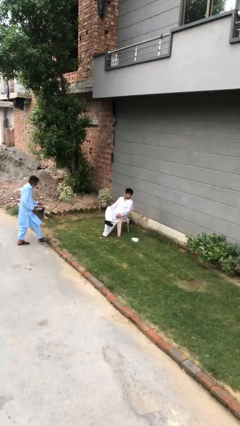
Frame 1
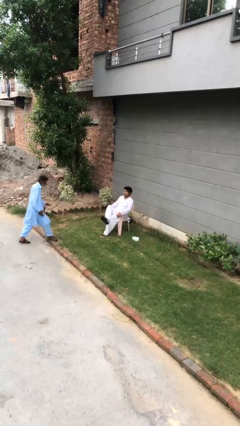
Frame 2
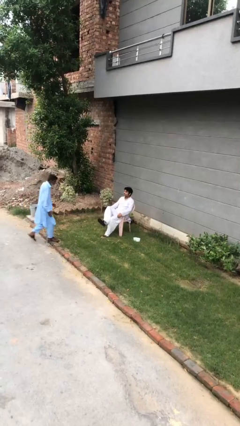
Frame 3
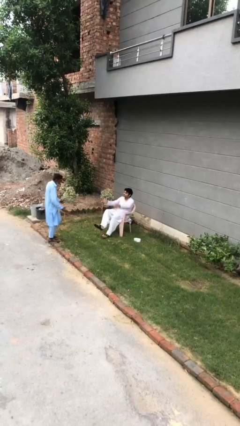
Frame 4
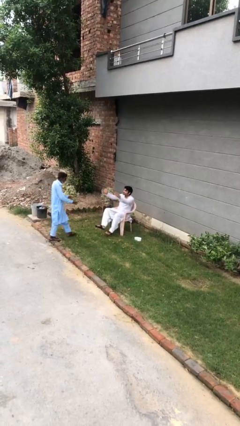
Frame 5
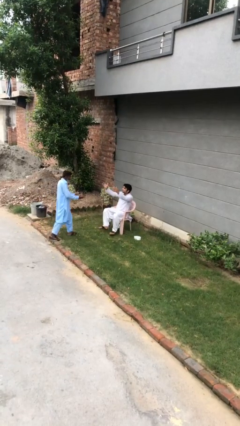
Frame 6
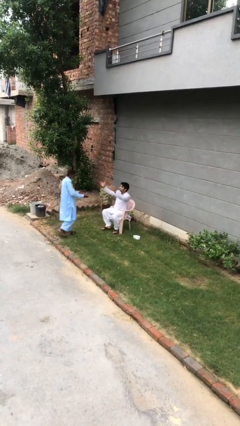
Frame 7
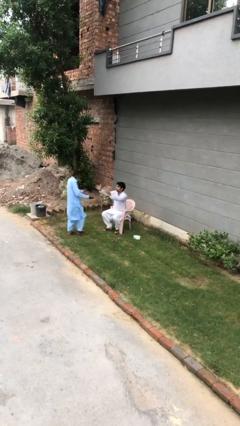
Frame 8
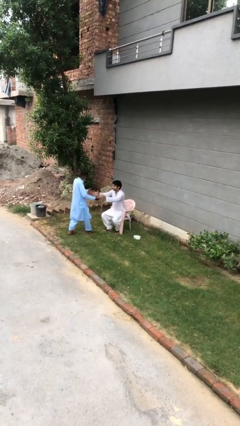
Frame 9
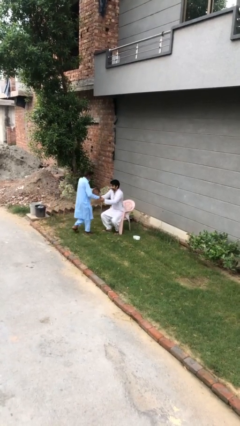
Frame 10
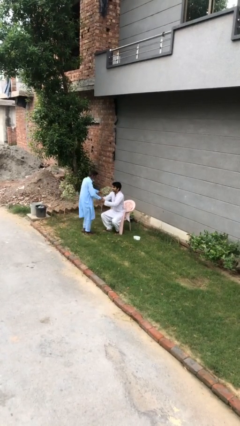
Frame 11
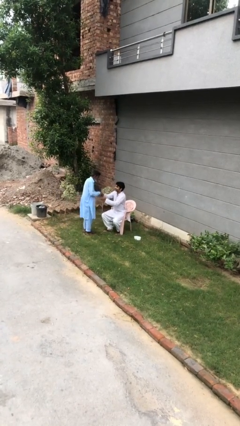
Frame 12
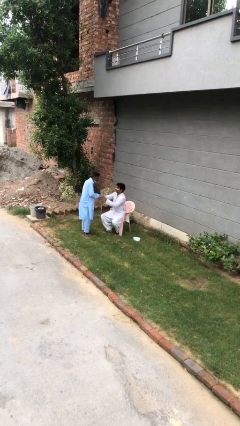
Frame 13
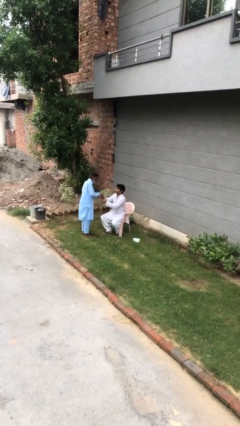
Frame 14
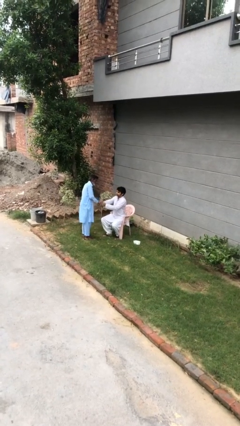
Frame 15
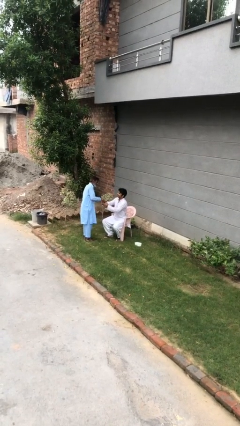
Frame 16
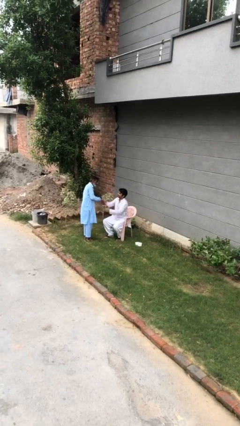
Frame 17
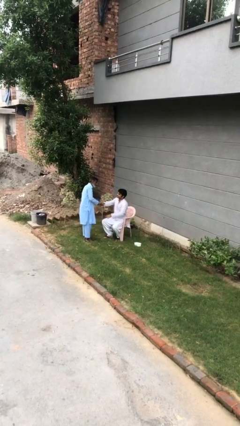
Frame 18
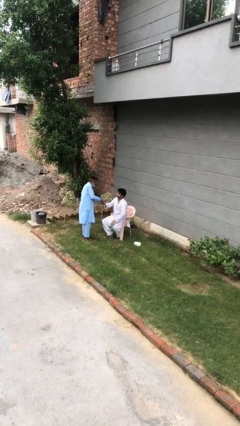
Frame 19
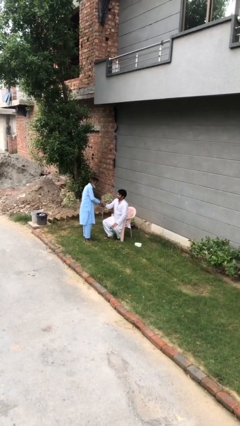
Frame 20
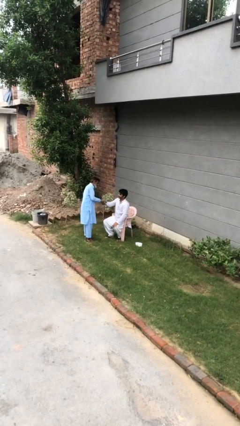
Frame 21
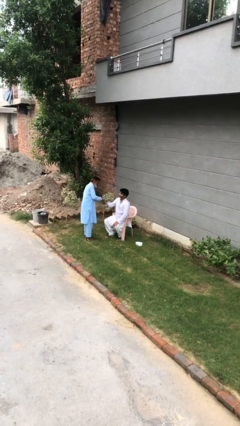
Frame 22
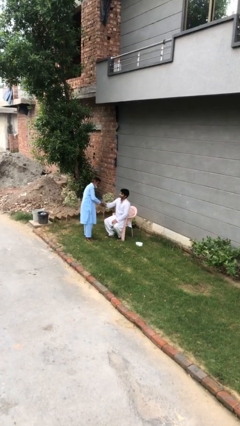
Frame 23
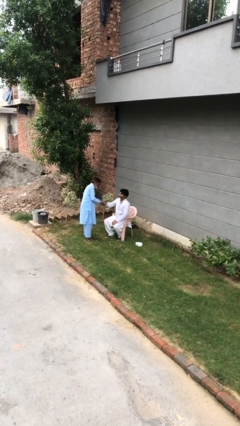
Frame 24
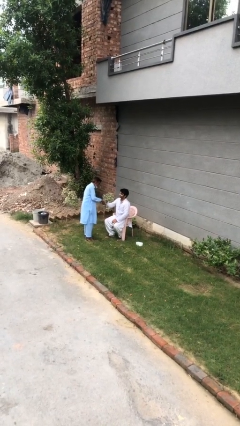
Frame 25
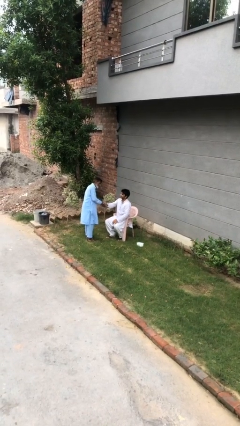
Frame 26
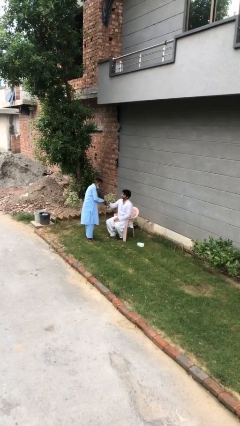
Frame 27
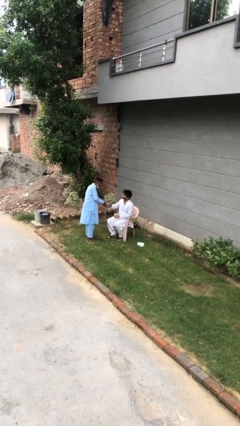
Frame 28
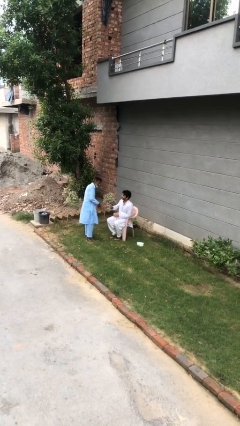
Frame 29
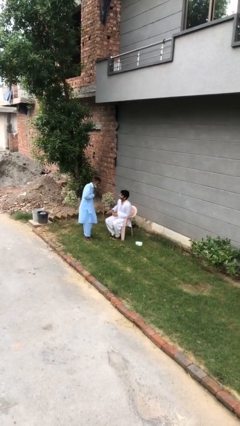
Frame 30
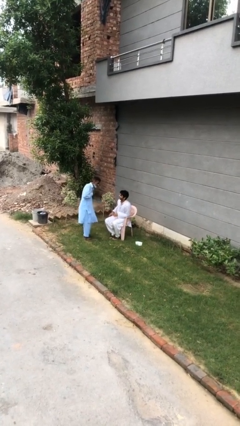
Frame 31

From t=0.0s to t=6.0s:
person shakes hand

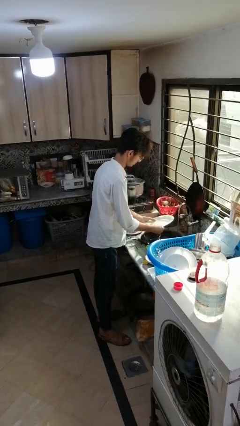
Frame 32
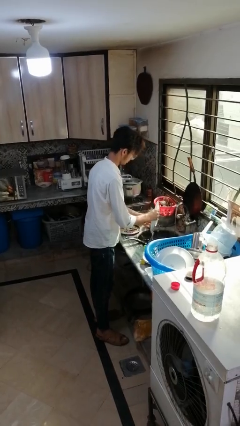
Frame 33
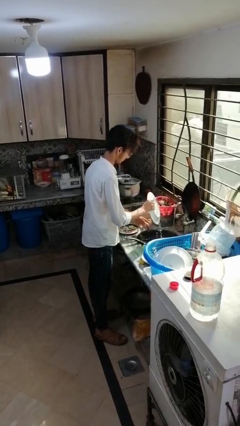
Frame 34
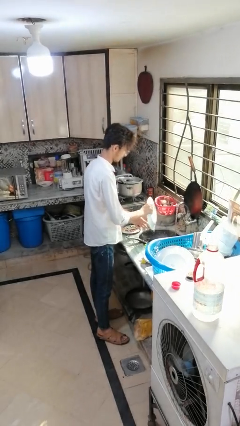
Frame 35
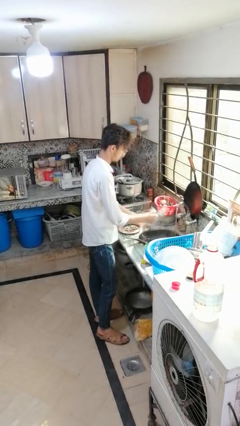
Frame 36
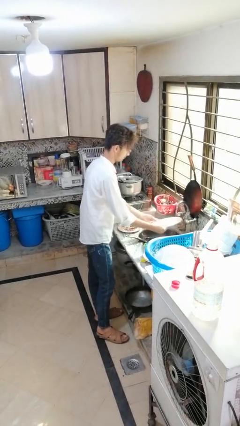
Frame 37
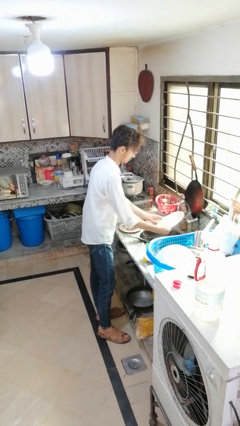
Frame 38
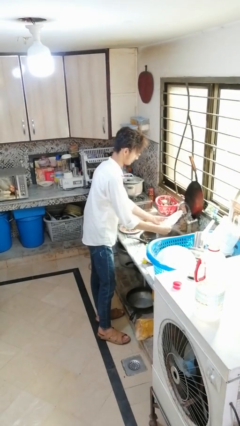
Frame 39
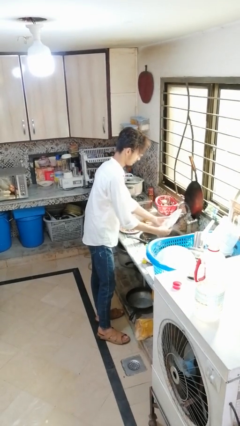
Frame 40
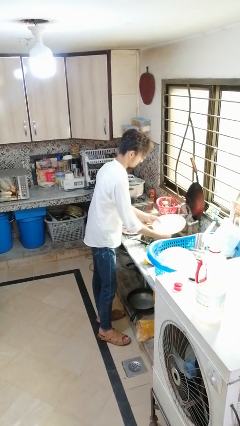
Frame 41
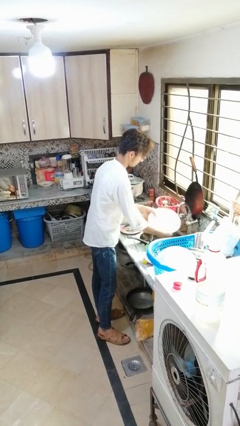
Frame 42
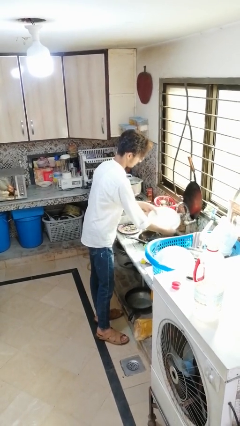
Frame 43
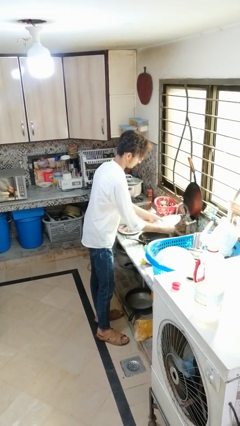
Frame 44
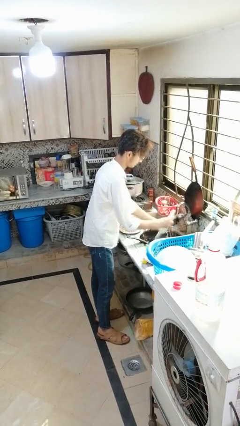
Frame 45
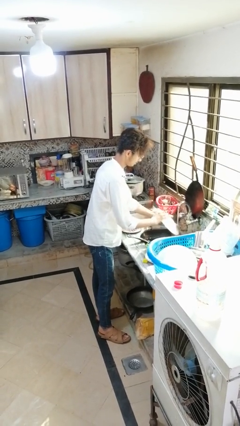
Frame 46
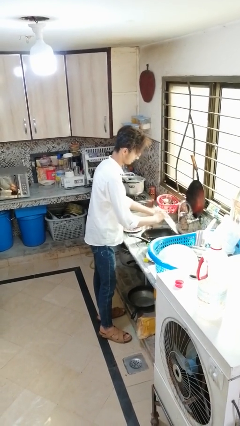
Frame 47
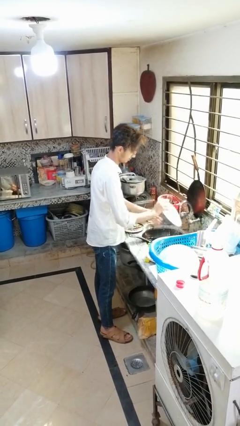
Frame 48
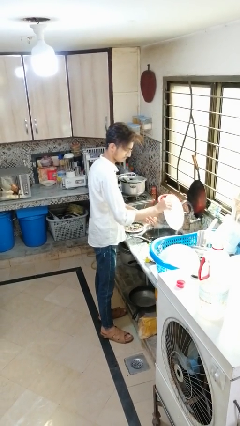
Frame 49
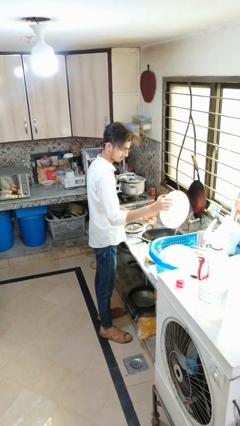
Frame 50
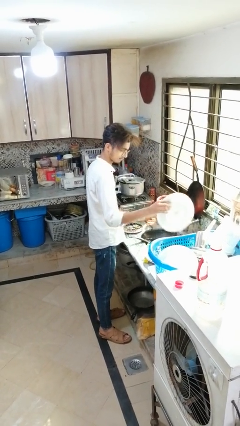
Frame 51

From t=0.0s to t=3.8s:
person washes dish

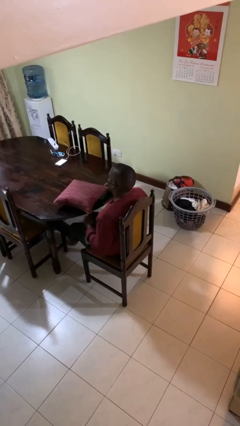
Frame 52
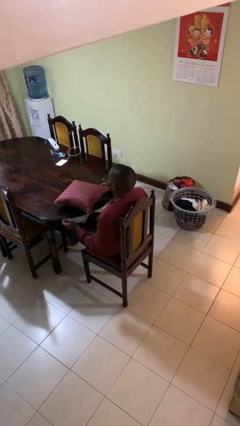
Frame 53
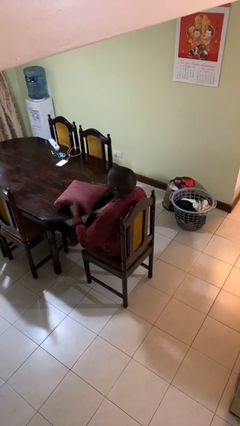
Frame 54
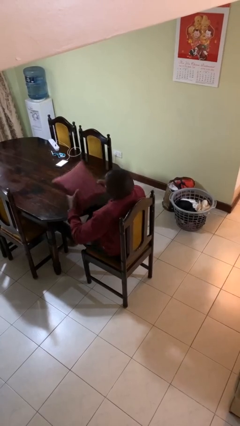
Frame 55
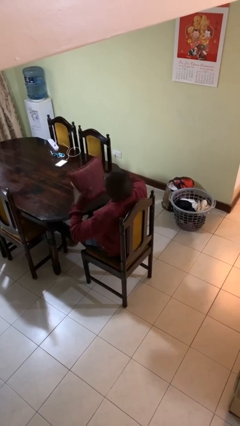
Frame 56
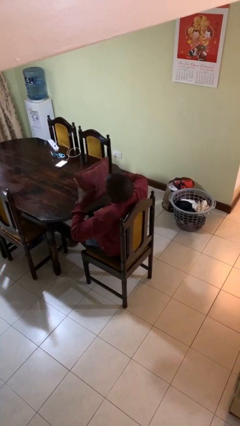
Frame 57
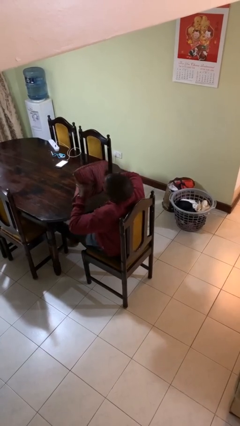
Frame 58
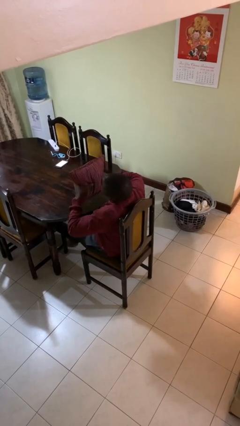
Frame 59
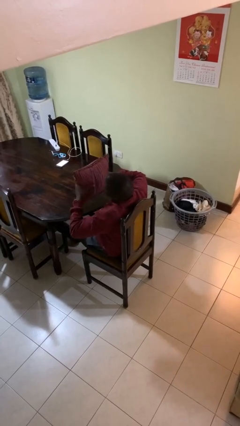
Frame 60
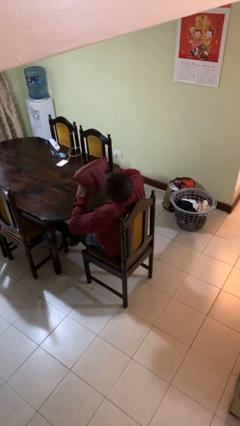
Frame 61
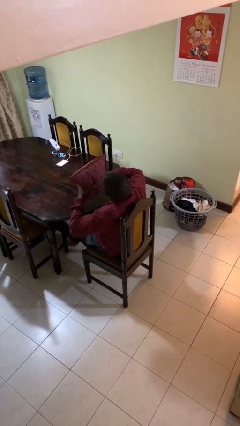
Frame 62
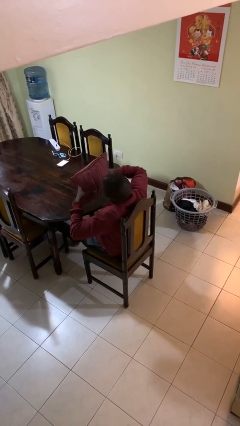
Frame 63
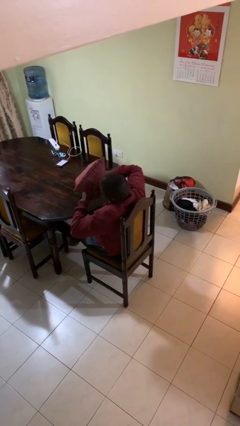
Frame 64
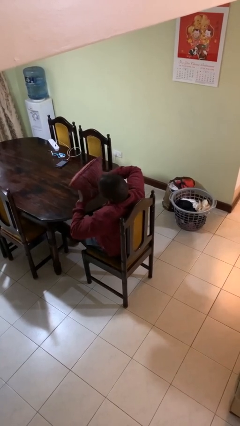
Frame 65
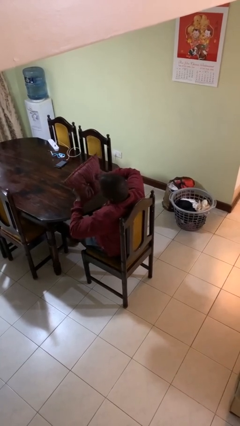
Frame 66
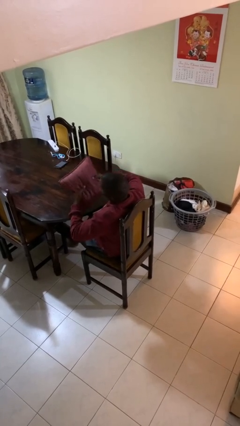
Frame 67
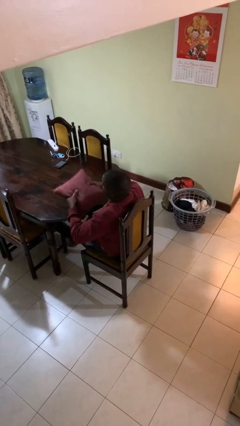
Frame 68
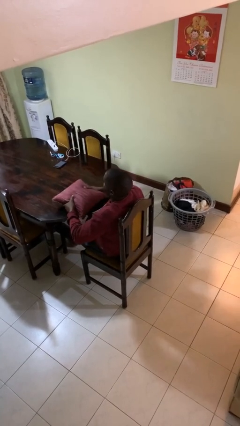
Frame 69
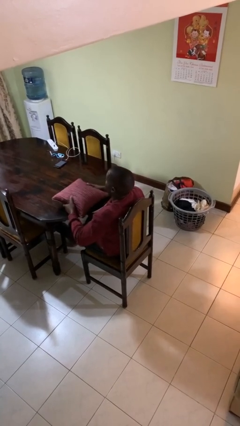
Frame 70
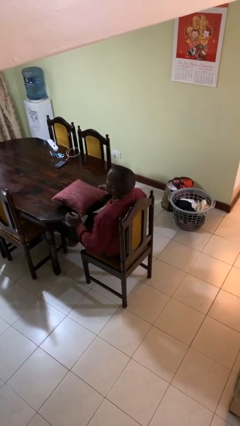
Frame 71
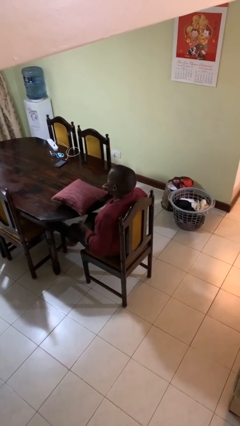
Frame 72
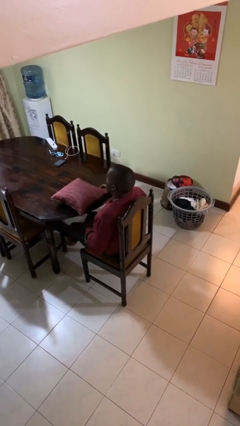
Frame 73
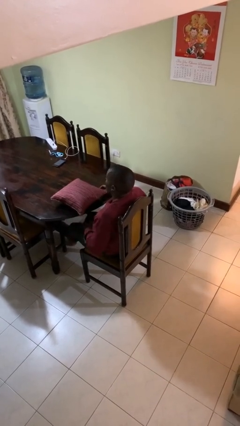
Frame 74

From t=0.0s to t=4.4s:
person squeezes object

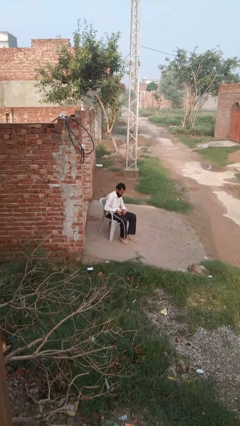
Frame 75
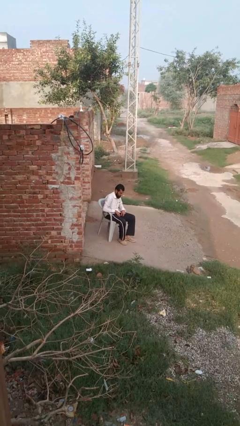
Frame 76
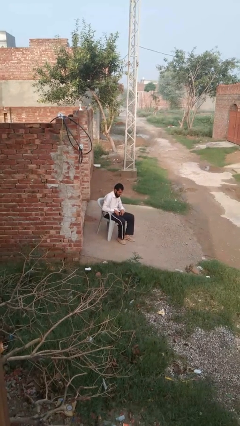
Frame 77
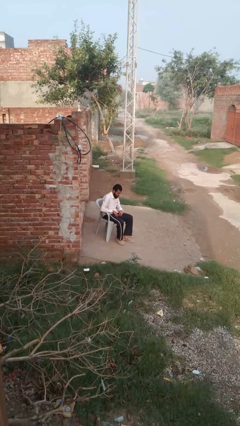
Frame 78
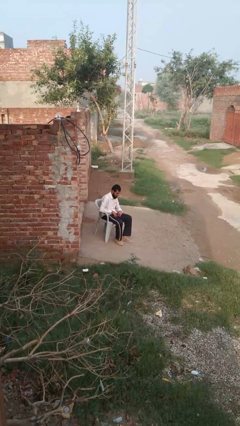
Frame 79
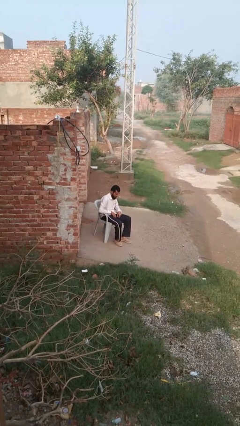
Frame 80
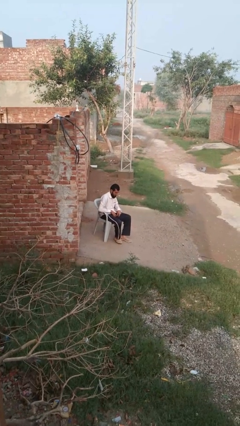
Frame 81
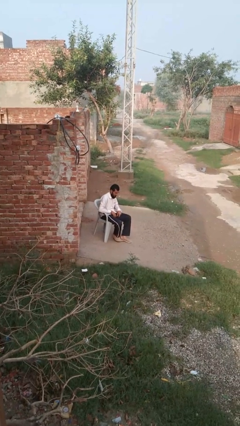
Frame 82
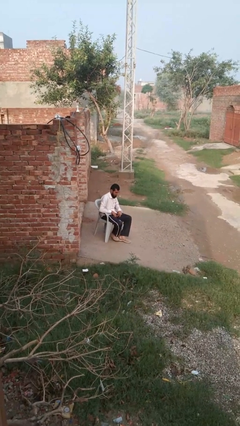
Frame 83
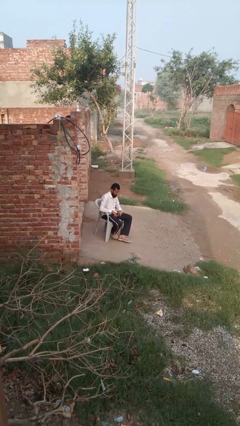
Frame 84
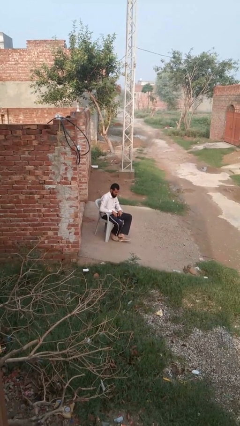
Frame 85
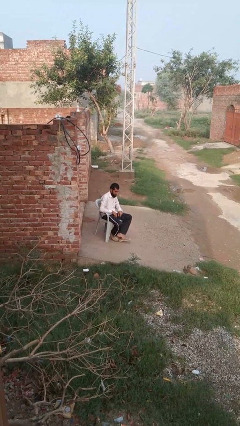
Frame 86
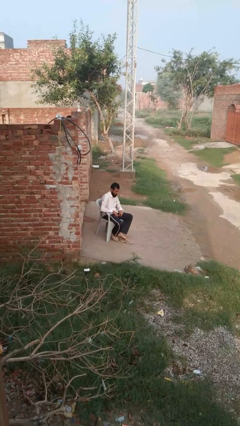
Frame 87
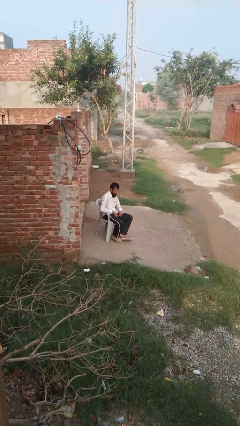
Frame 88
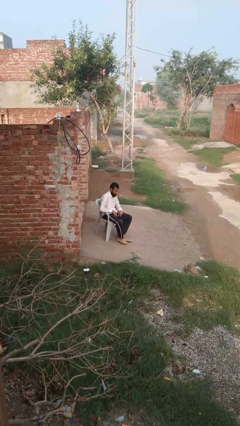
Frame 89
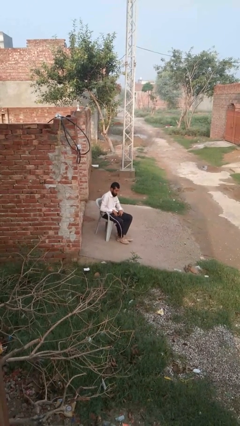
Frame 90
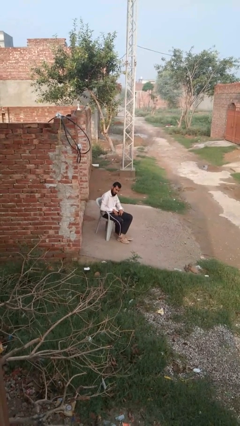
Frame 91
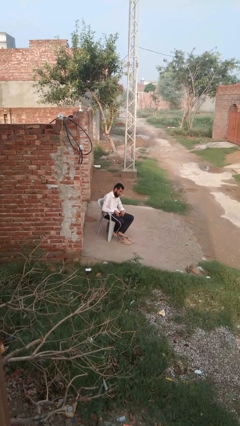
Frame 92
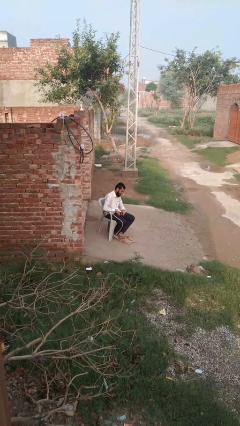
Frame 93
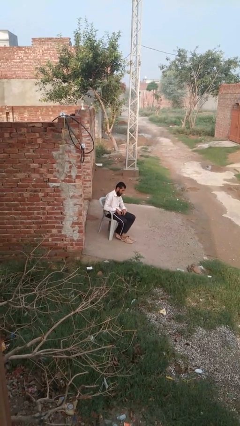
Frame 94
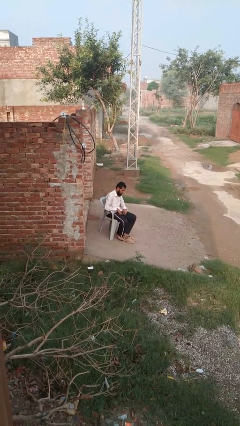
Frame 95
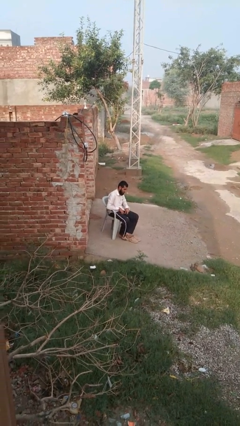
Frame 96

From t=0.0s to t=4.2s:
person takes off shoes
